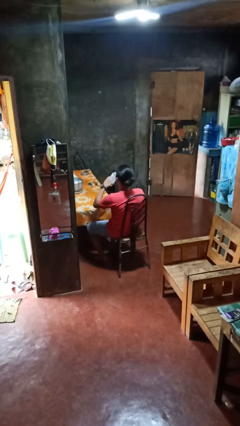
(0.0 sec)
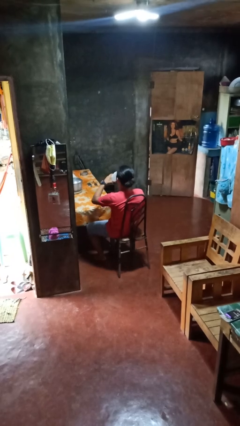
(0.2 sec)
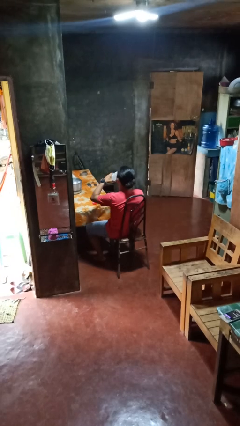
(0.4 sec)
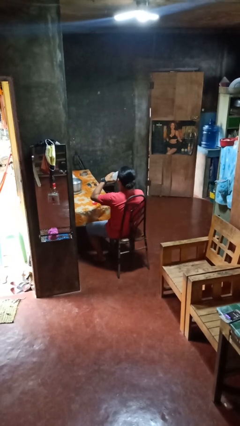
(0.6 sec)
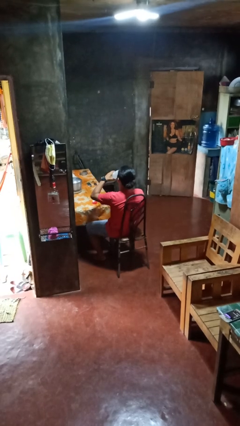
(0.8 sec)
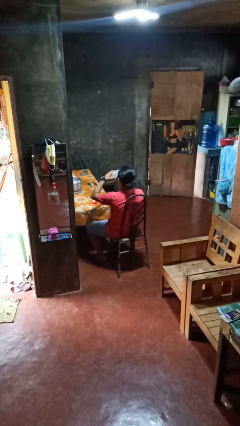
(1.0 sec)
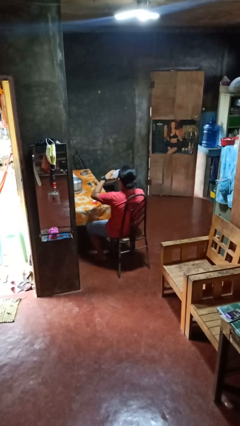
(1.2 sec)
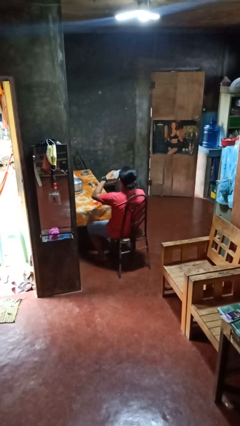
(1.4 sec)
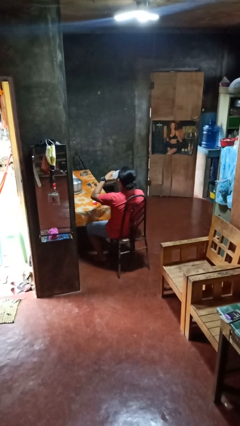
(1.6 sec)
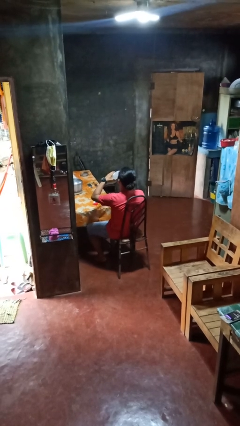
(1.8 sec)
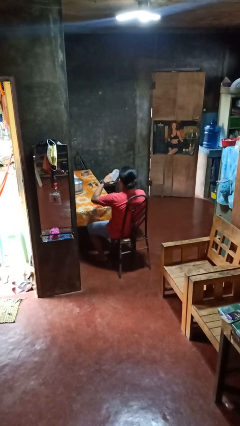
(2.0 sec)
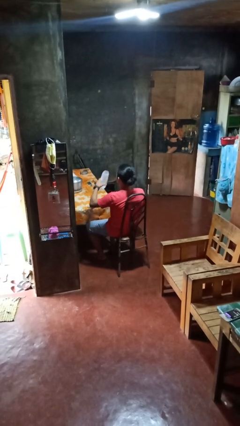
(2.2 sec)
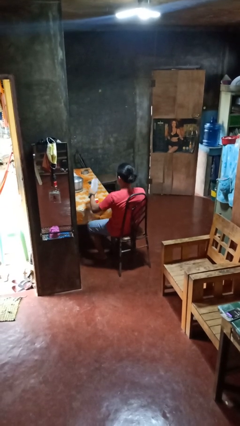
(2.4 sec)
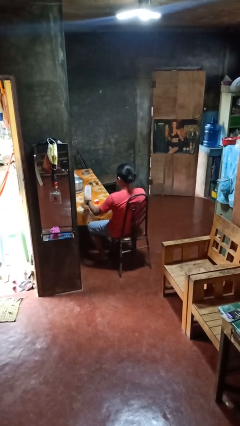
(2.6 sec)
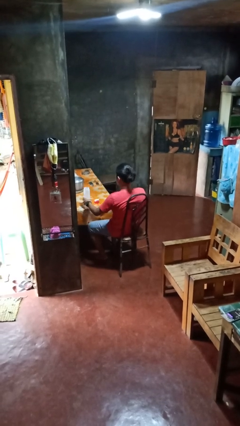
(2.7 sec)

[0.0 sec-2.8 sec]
person drinks from bottle

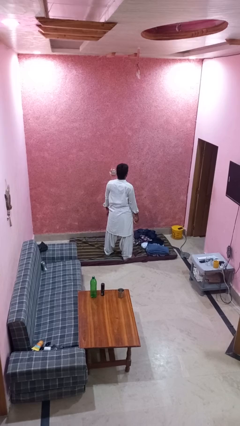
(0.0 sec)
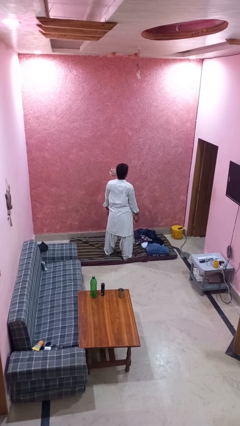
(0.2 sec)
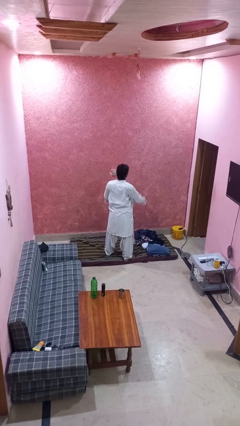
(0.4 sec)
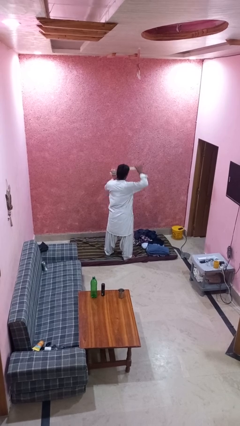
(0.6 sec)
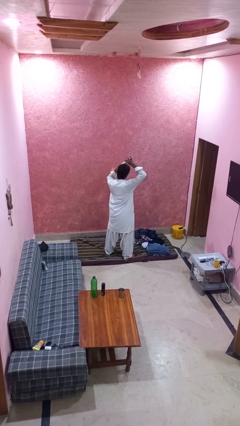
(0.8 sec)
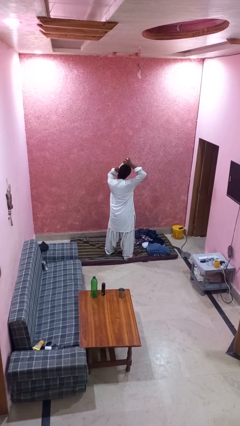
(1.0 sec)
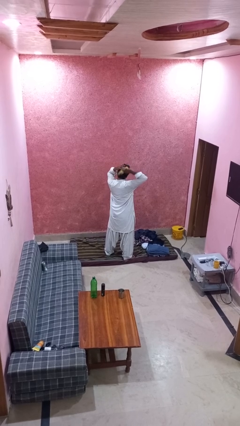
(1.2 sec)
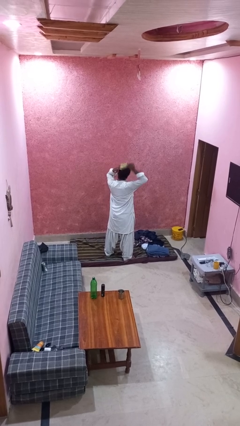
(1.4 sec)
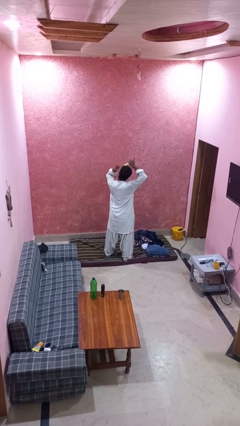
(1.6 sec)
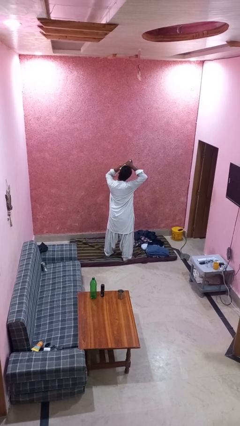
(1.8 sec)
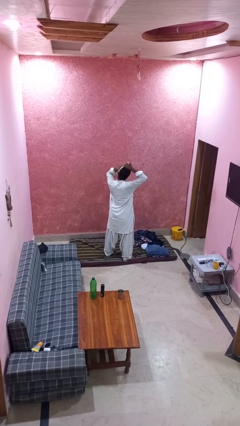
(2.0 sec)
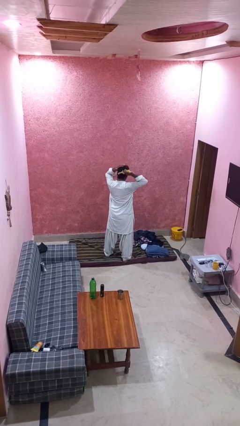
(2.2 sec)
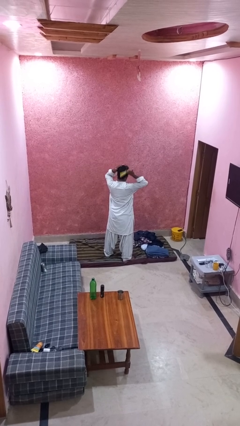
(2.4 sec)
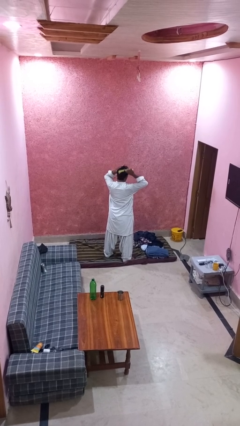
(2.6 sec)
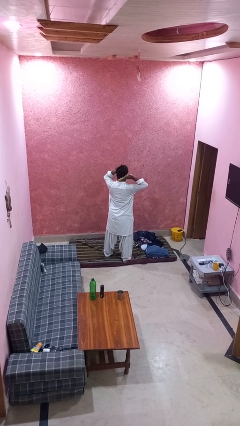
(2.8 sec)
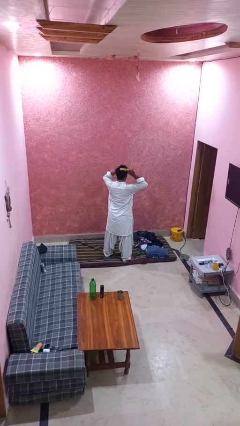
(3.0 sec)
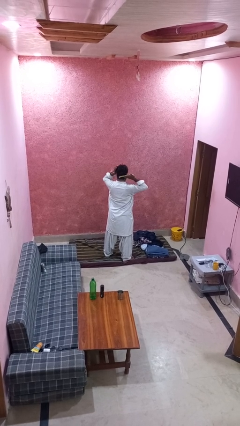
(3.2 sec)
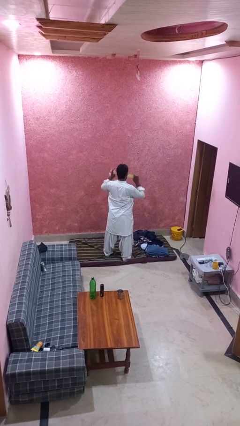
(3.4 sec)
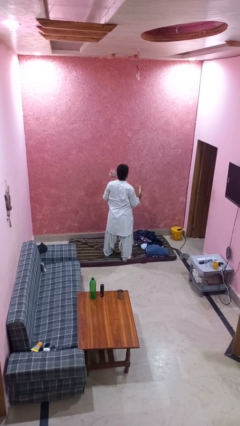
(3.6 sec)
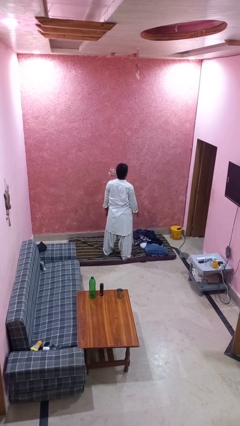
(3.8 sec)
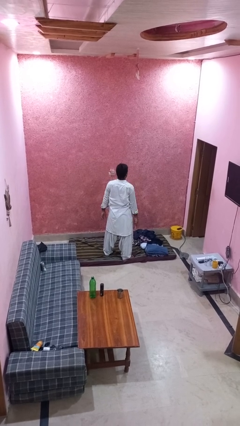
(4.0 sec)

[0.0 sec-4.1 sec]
person brushes hair

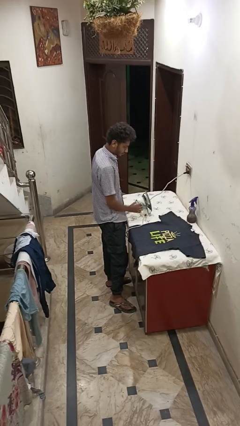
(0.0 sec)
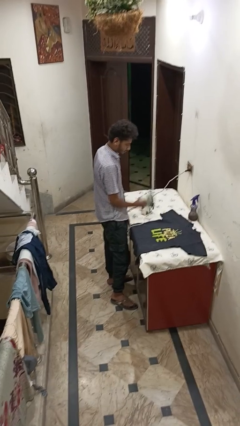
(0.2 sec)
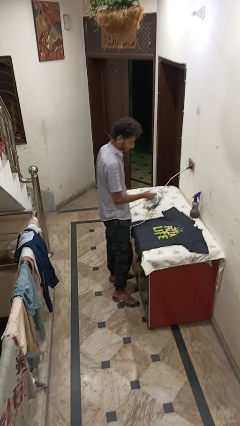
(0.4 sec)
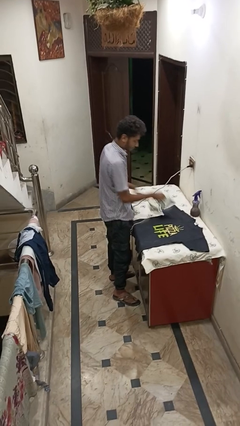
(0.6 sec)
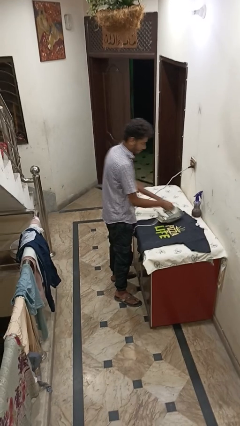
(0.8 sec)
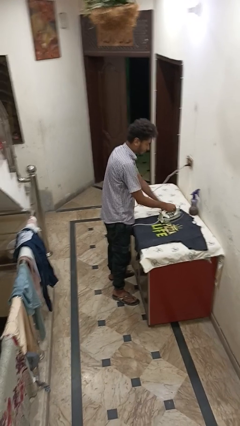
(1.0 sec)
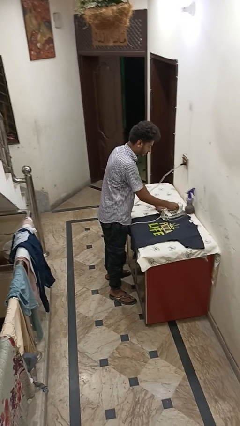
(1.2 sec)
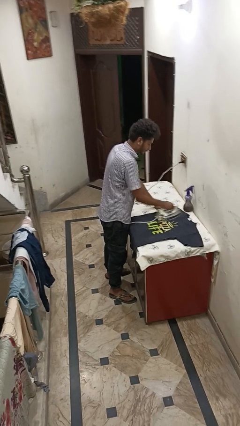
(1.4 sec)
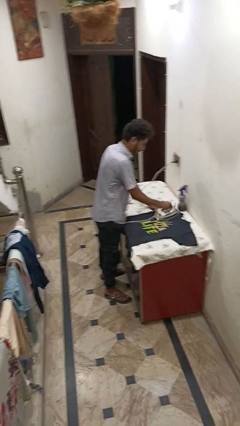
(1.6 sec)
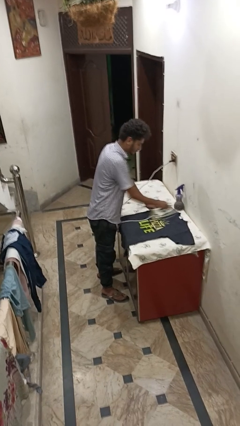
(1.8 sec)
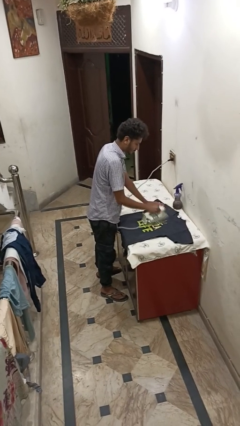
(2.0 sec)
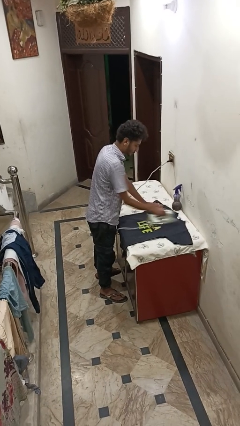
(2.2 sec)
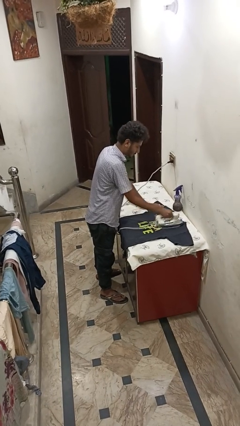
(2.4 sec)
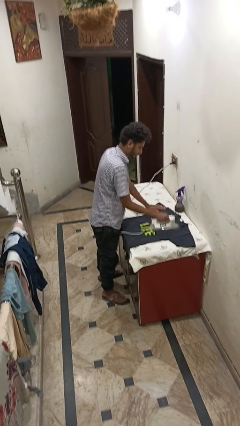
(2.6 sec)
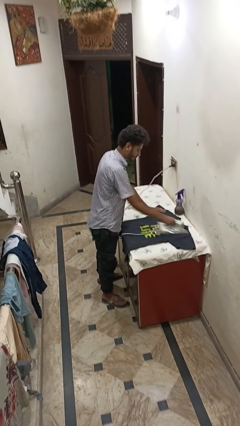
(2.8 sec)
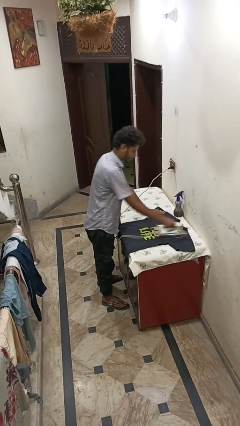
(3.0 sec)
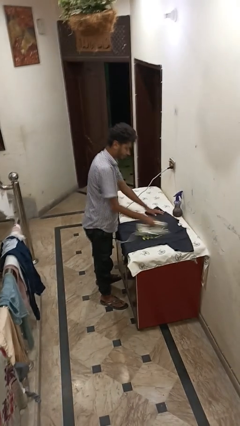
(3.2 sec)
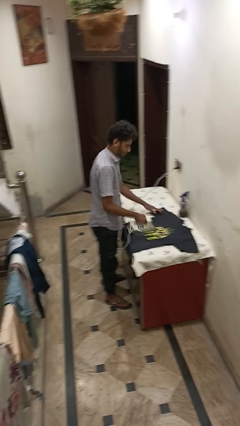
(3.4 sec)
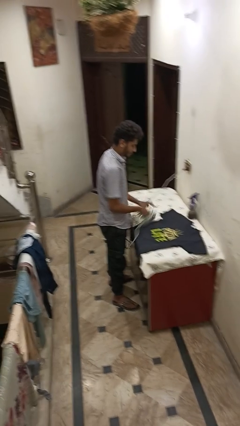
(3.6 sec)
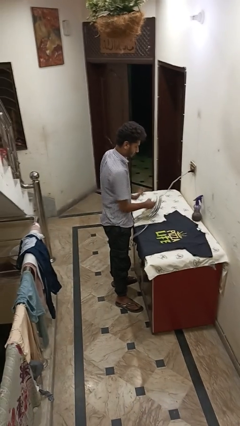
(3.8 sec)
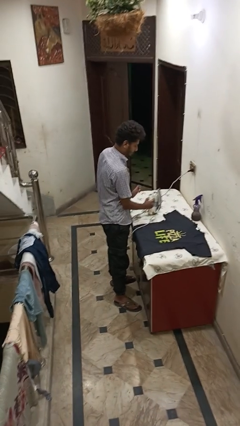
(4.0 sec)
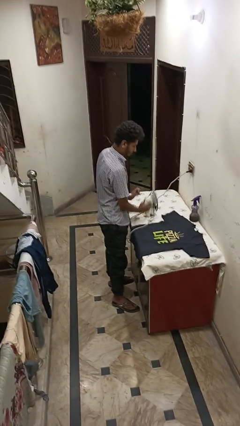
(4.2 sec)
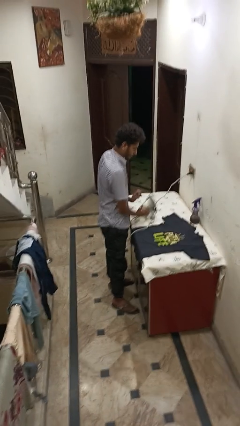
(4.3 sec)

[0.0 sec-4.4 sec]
person irons clothes

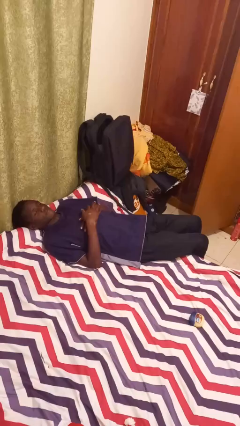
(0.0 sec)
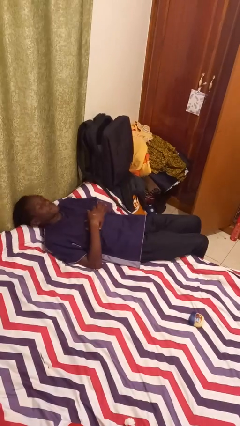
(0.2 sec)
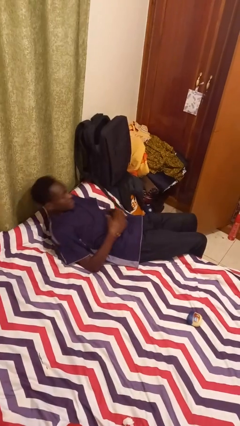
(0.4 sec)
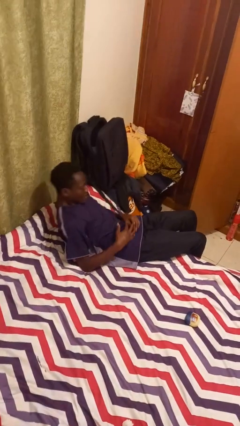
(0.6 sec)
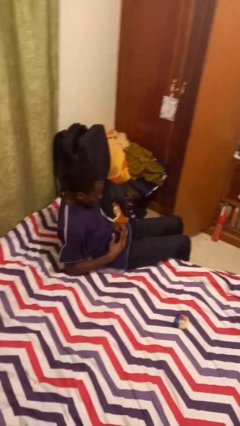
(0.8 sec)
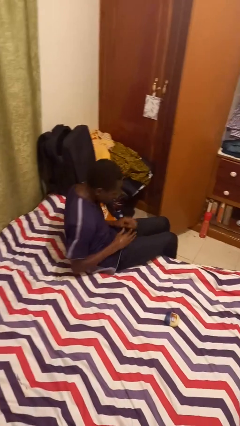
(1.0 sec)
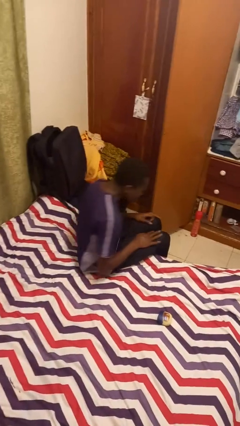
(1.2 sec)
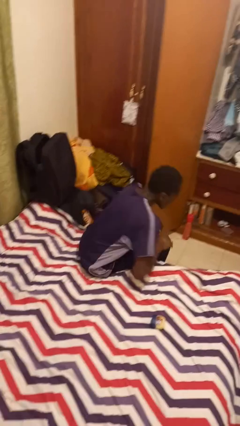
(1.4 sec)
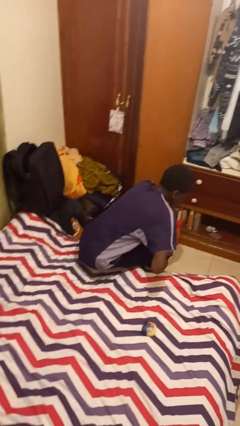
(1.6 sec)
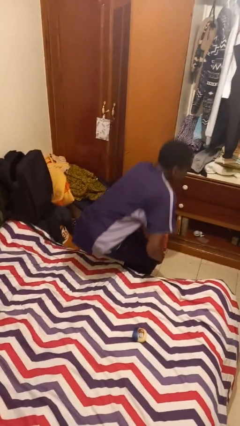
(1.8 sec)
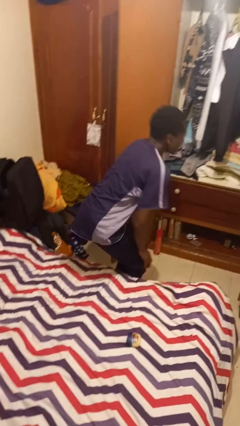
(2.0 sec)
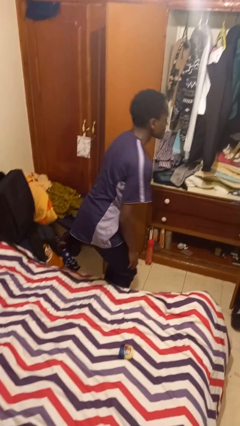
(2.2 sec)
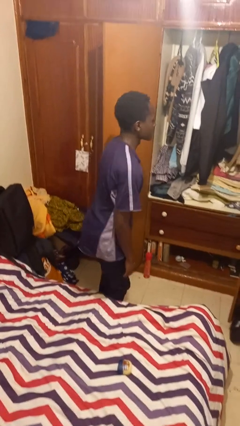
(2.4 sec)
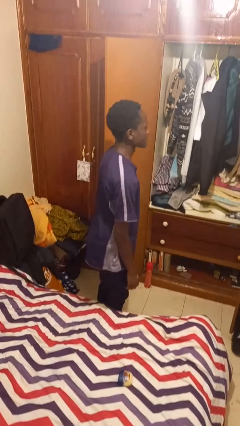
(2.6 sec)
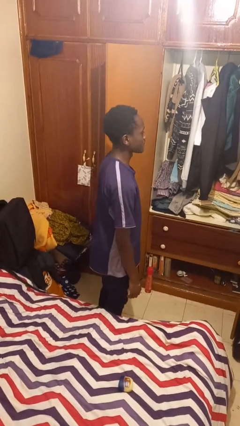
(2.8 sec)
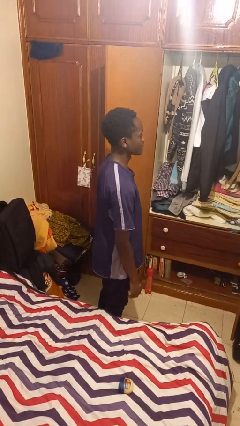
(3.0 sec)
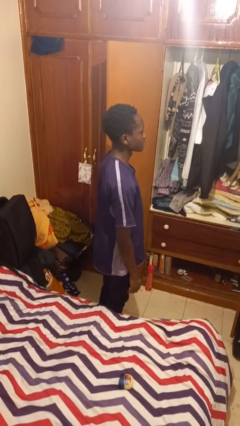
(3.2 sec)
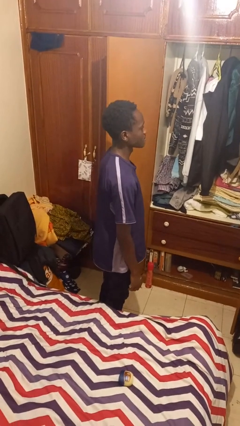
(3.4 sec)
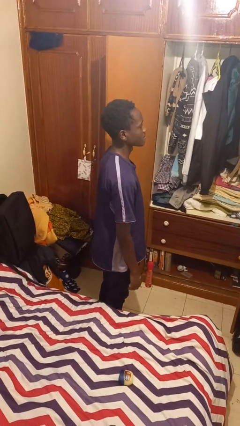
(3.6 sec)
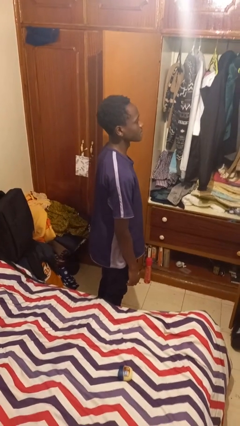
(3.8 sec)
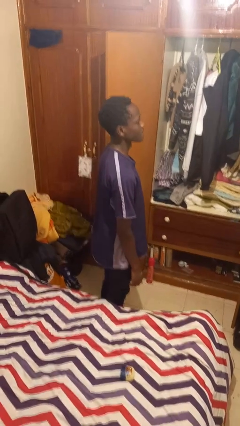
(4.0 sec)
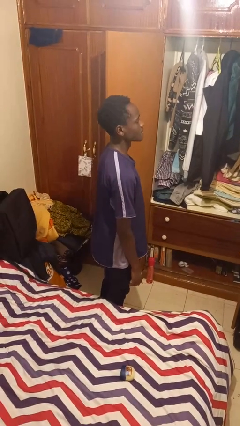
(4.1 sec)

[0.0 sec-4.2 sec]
person stands up

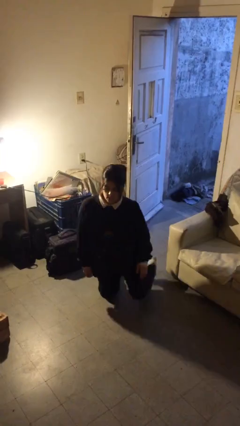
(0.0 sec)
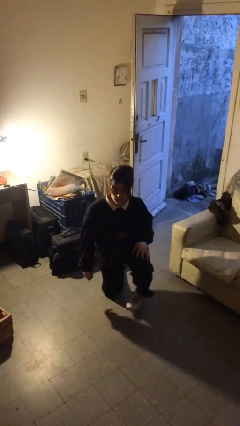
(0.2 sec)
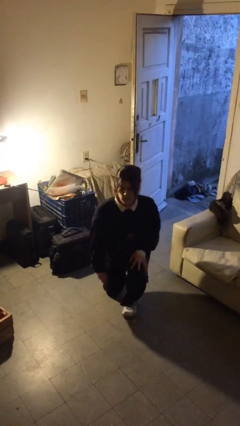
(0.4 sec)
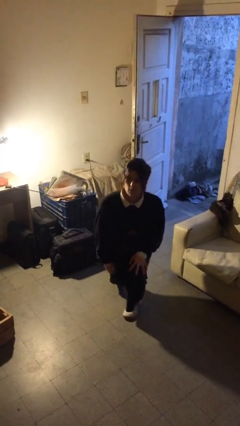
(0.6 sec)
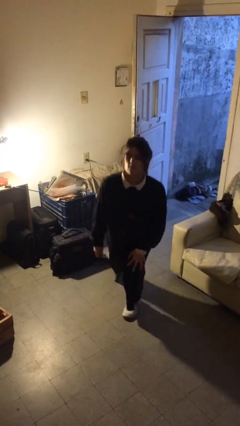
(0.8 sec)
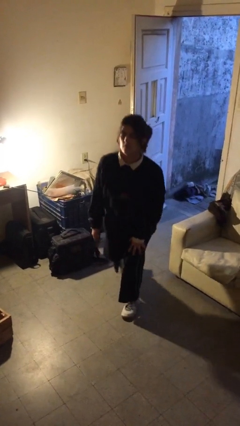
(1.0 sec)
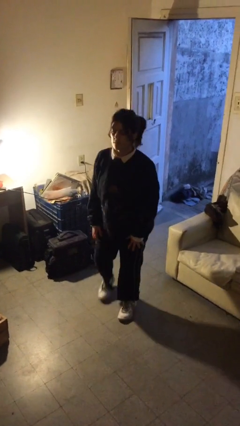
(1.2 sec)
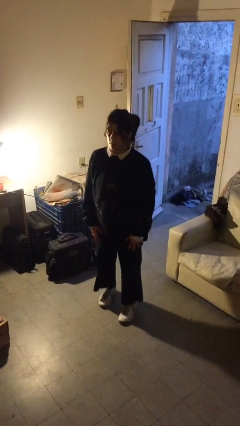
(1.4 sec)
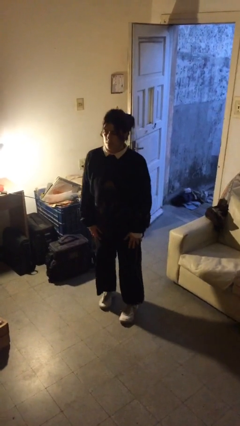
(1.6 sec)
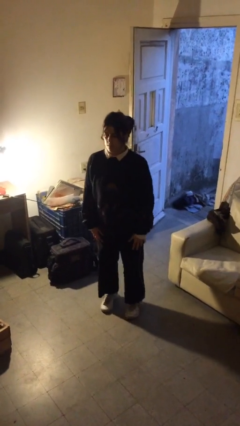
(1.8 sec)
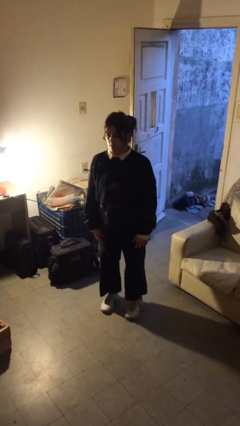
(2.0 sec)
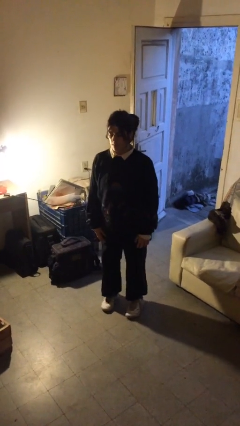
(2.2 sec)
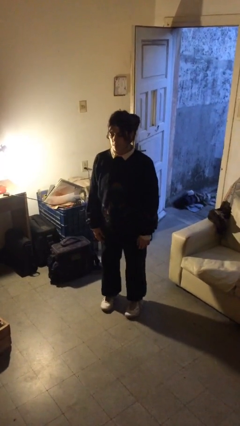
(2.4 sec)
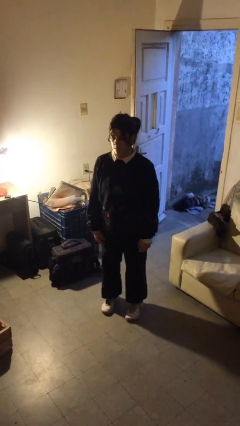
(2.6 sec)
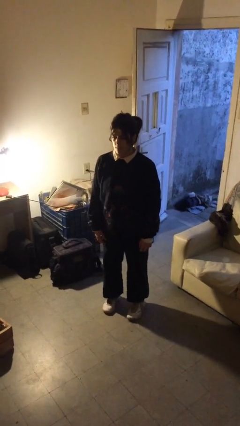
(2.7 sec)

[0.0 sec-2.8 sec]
person stands up from floor
